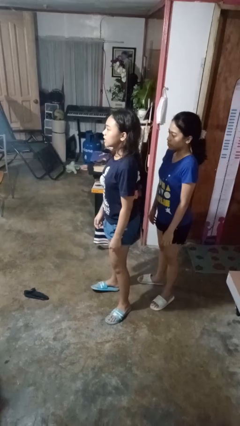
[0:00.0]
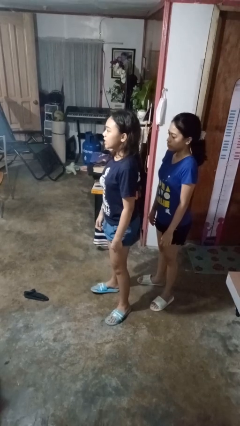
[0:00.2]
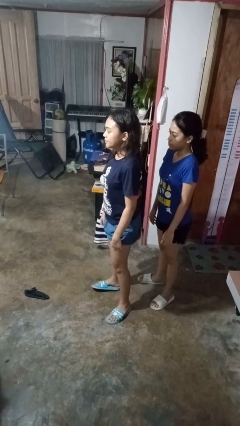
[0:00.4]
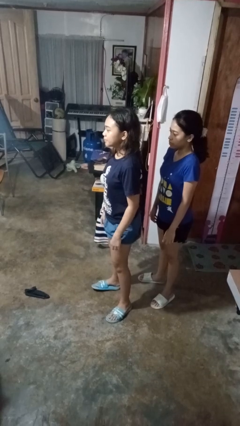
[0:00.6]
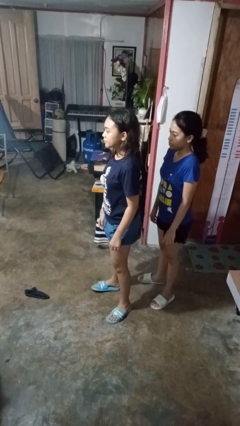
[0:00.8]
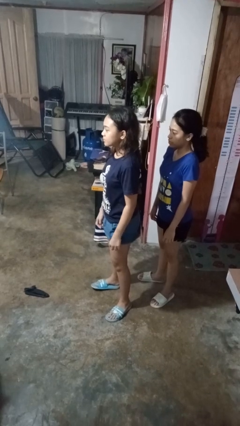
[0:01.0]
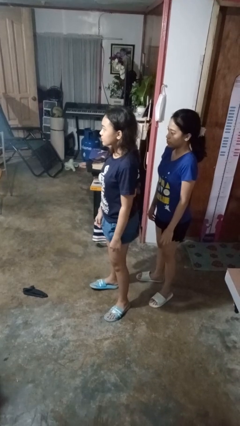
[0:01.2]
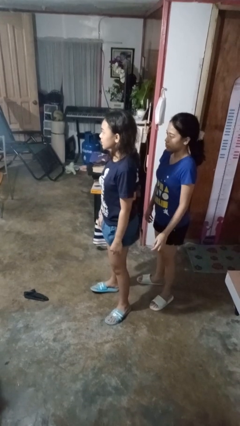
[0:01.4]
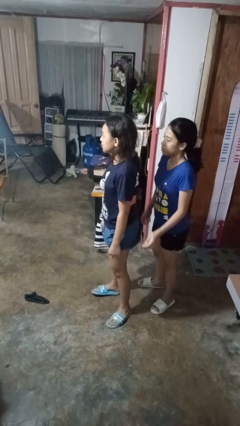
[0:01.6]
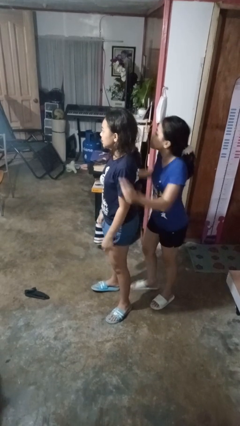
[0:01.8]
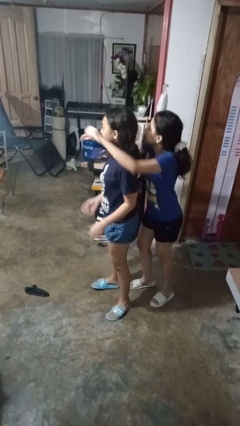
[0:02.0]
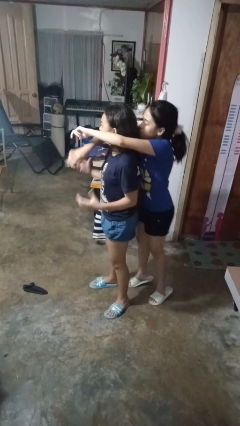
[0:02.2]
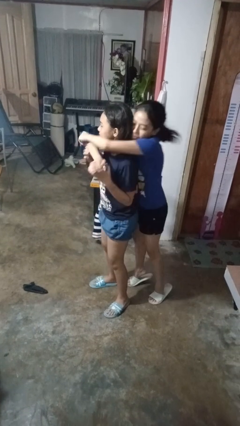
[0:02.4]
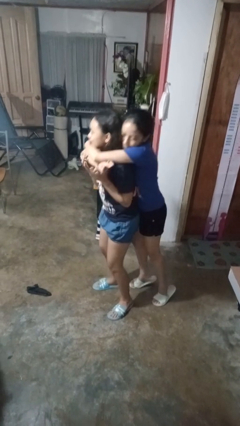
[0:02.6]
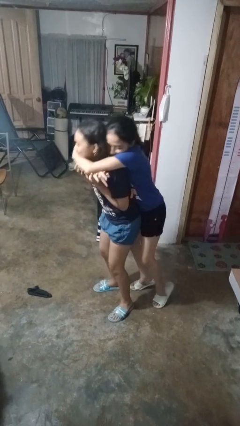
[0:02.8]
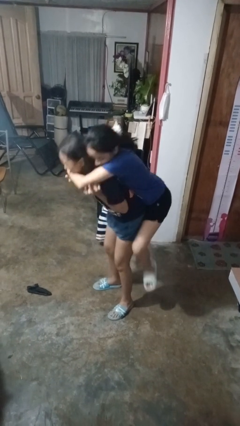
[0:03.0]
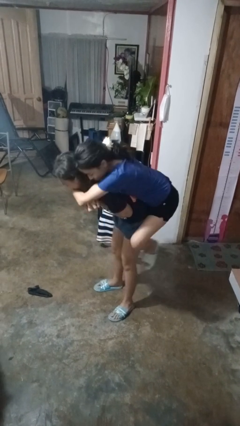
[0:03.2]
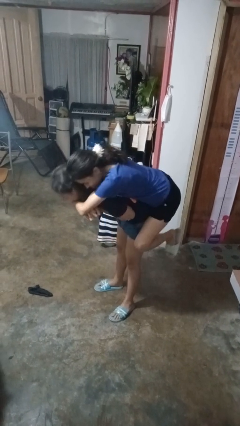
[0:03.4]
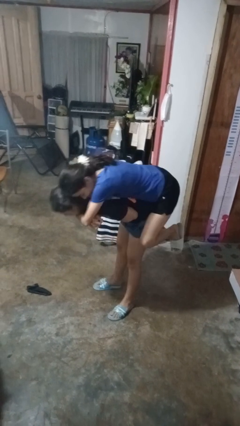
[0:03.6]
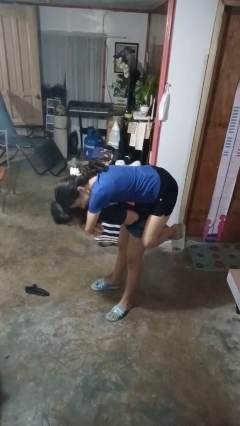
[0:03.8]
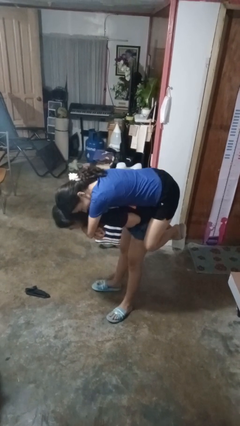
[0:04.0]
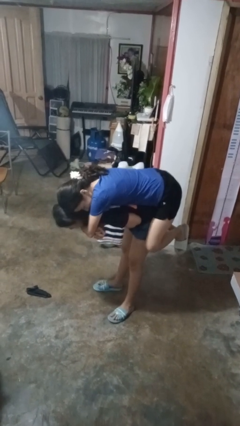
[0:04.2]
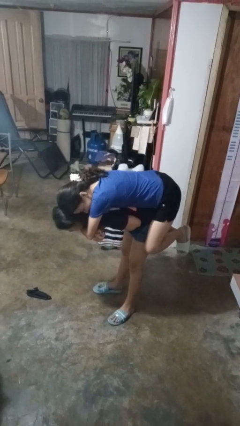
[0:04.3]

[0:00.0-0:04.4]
person picks up person

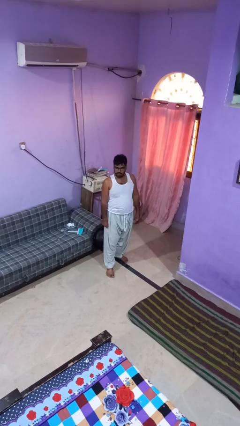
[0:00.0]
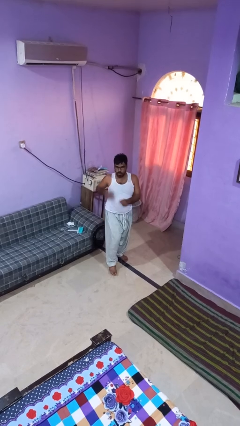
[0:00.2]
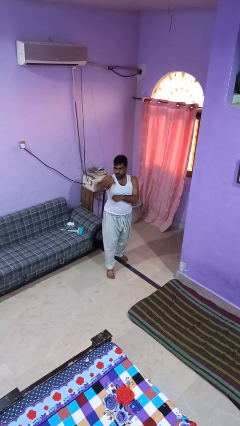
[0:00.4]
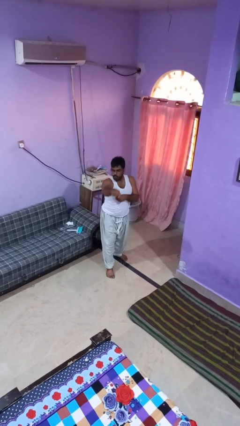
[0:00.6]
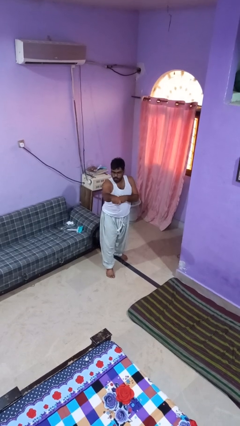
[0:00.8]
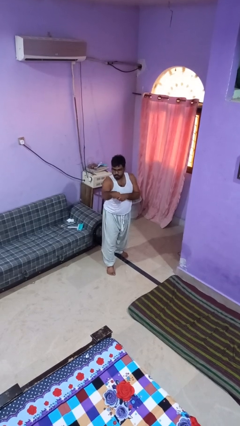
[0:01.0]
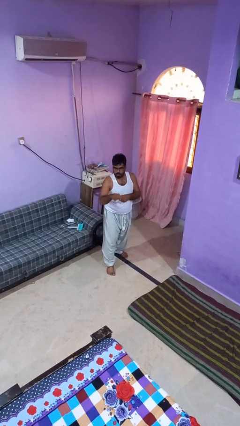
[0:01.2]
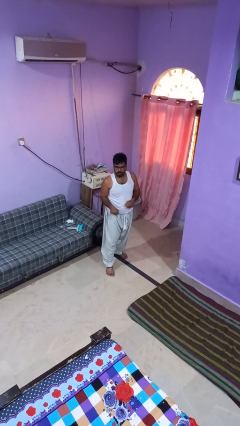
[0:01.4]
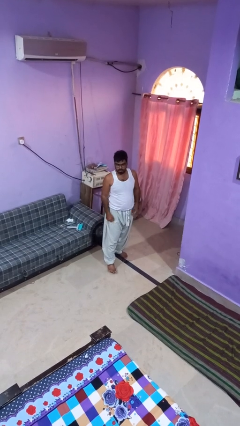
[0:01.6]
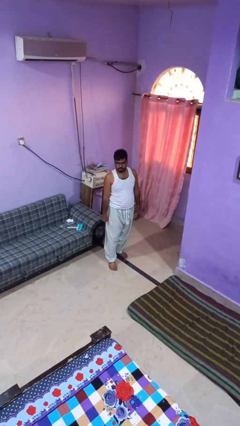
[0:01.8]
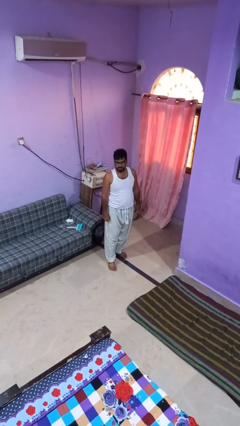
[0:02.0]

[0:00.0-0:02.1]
person punches

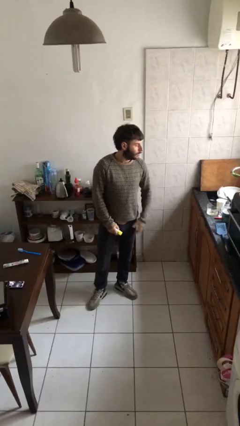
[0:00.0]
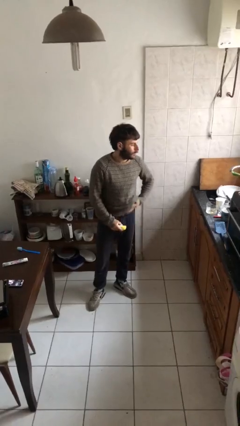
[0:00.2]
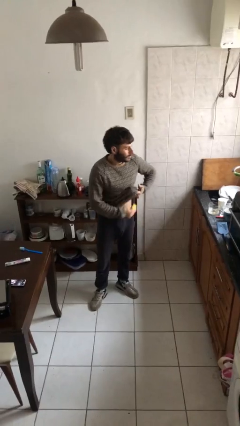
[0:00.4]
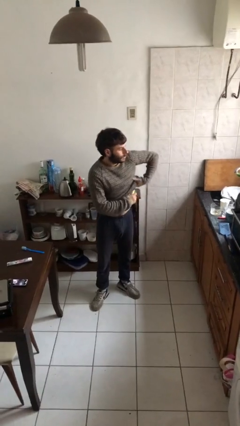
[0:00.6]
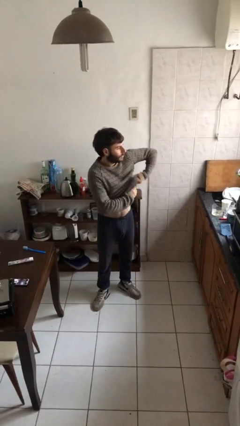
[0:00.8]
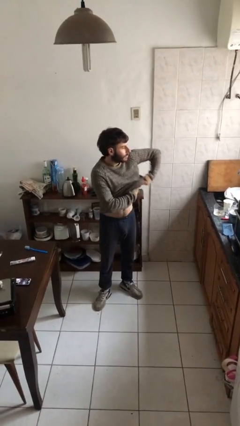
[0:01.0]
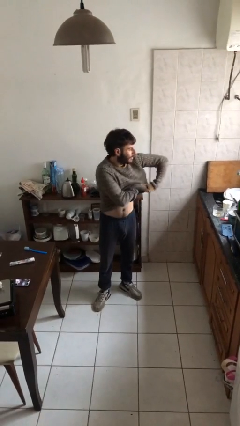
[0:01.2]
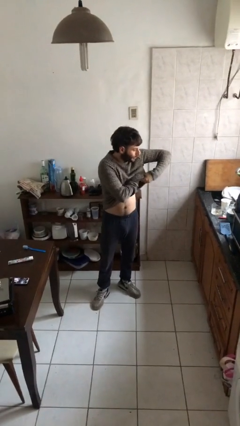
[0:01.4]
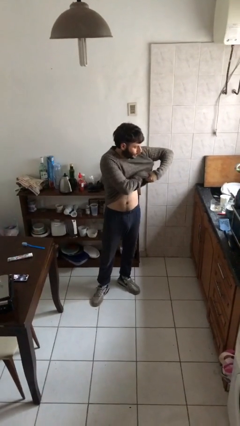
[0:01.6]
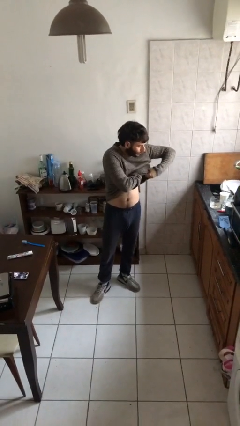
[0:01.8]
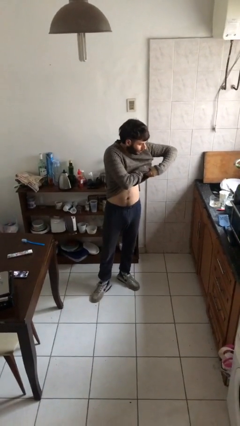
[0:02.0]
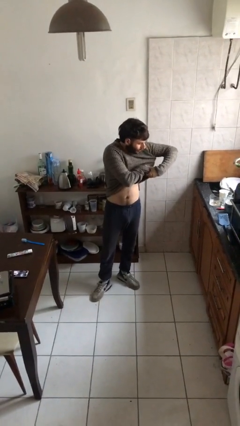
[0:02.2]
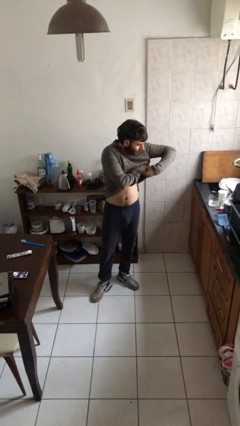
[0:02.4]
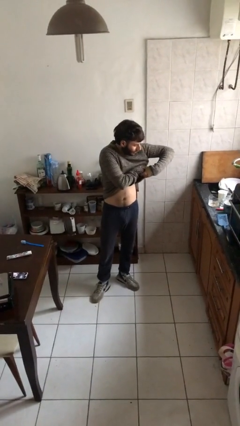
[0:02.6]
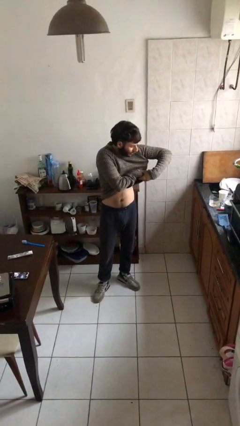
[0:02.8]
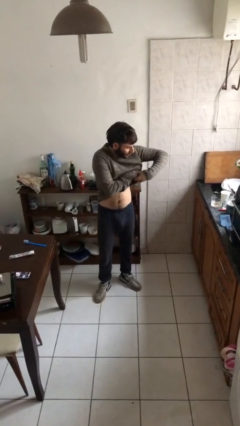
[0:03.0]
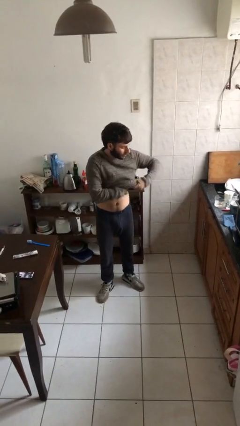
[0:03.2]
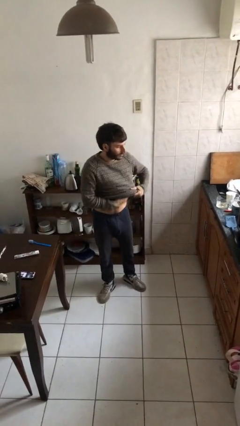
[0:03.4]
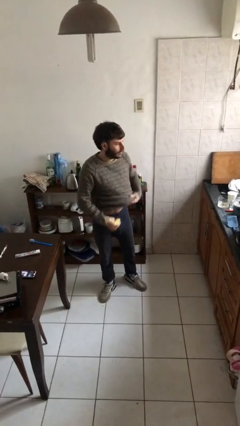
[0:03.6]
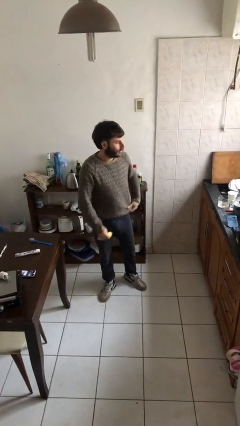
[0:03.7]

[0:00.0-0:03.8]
person applies deodorant

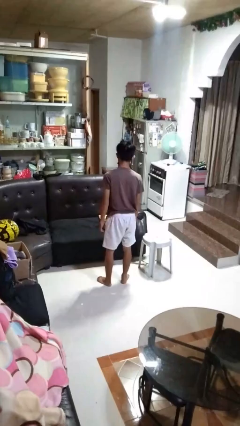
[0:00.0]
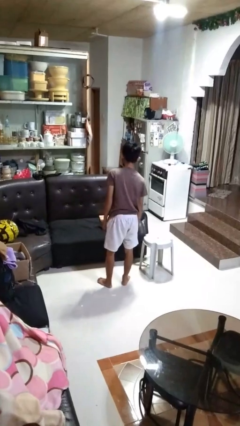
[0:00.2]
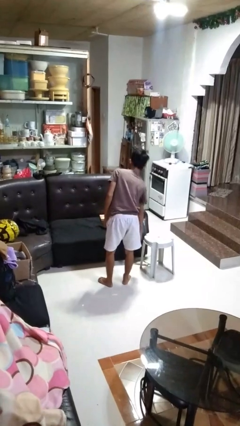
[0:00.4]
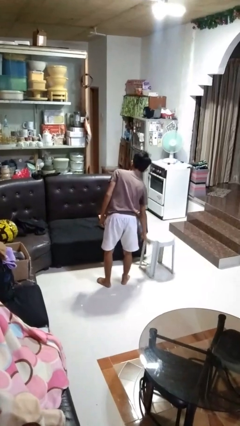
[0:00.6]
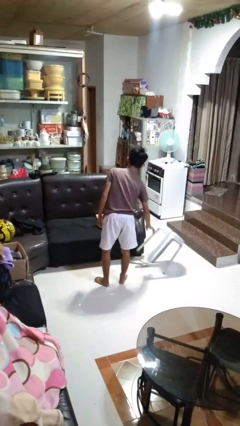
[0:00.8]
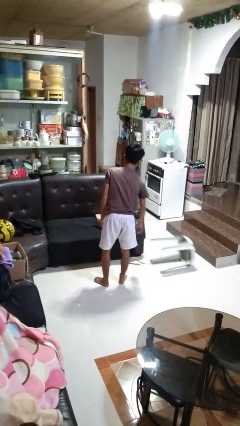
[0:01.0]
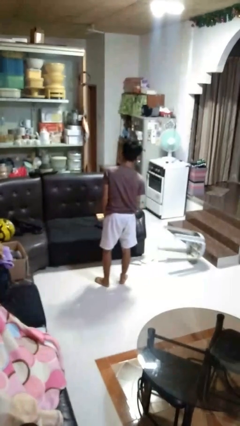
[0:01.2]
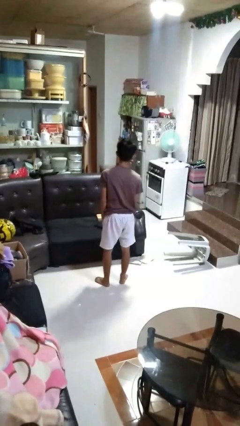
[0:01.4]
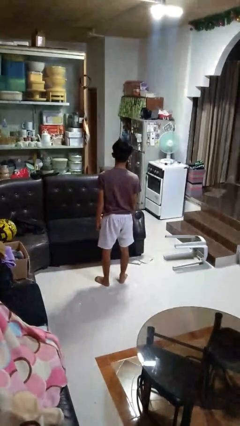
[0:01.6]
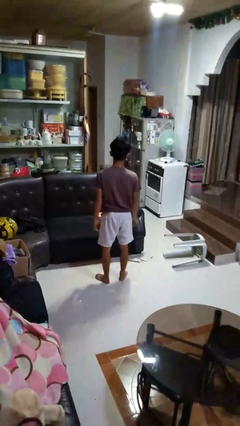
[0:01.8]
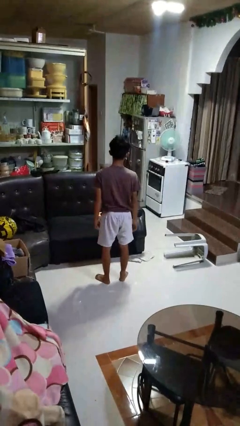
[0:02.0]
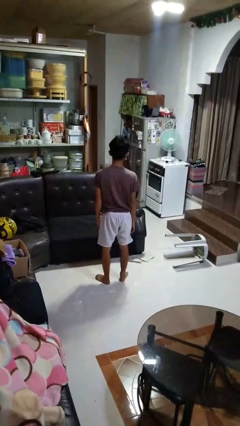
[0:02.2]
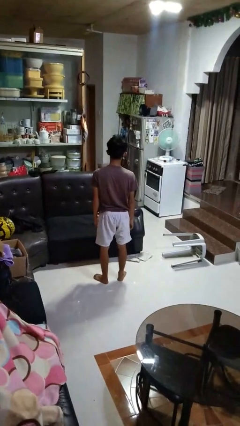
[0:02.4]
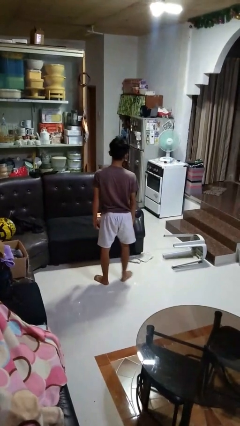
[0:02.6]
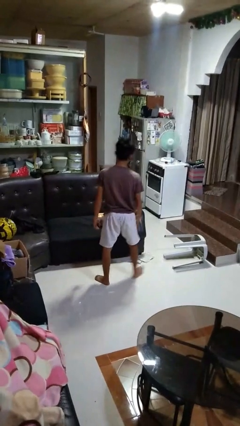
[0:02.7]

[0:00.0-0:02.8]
person knocks over furniture

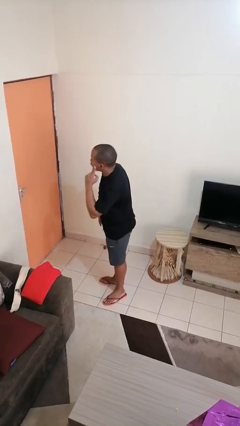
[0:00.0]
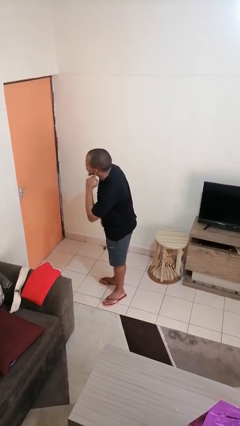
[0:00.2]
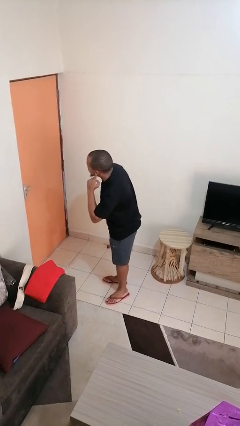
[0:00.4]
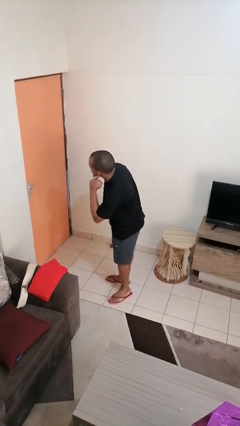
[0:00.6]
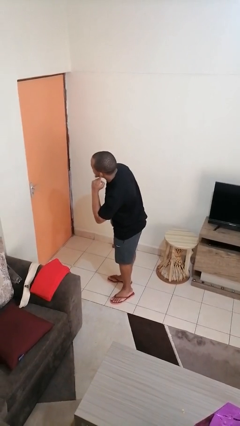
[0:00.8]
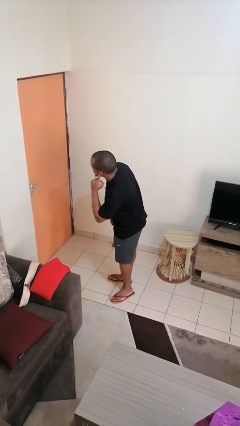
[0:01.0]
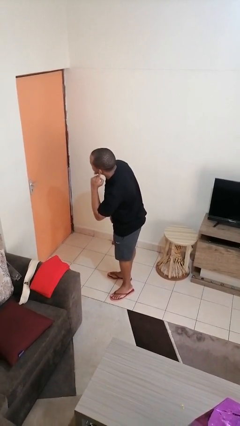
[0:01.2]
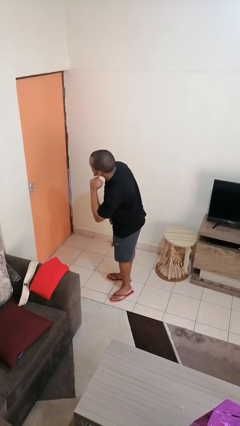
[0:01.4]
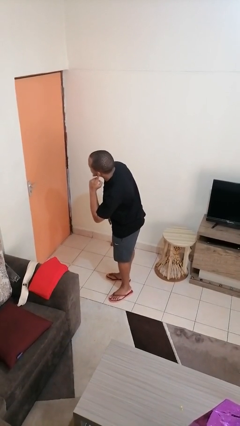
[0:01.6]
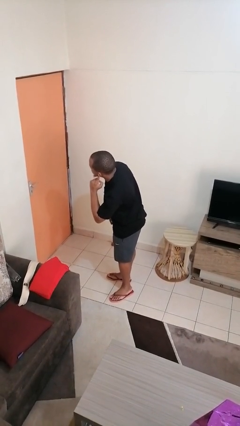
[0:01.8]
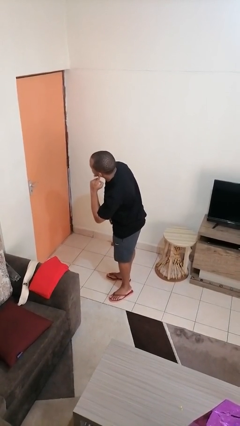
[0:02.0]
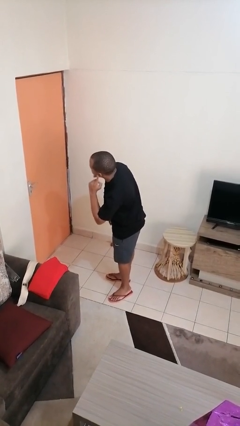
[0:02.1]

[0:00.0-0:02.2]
person gestures listen closely

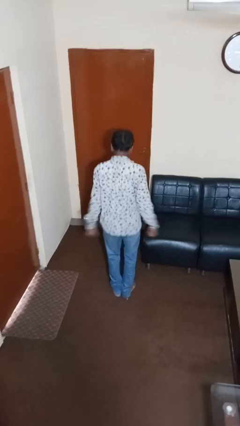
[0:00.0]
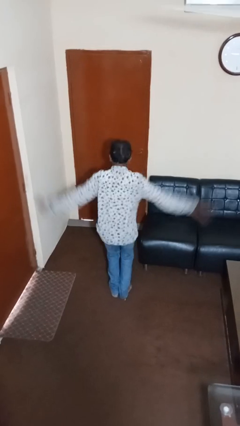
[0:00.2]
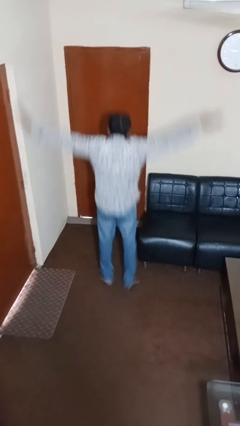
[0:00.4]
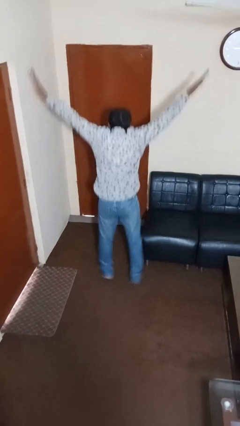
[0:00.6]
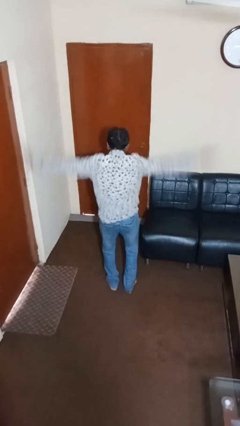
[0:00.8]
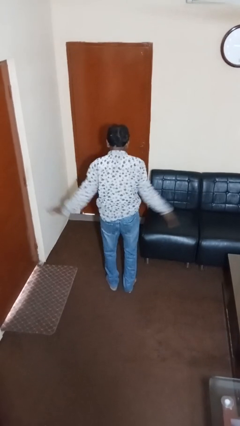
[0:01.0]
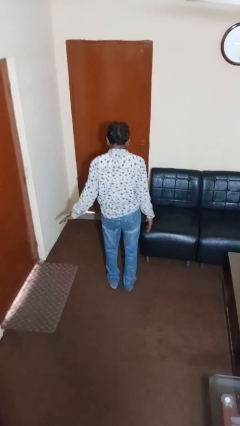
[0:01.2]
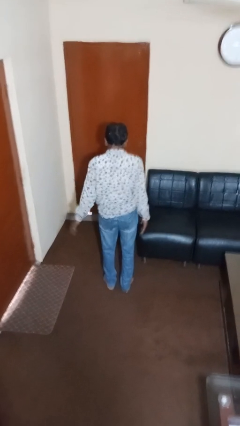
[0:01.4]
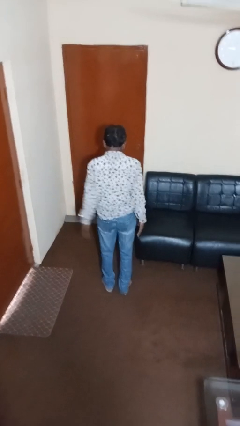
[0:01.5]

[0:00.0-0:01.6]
person exercises with jumping jacks

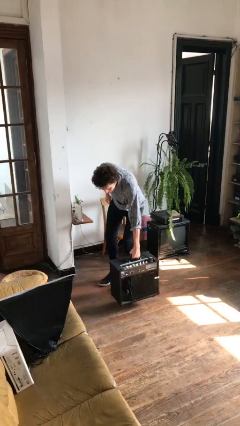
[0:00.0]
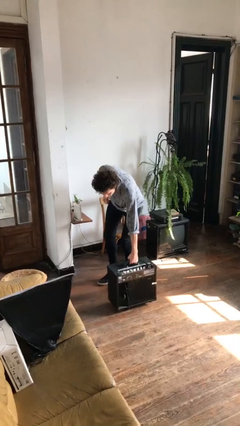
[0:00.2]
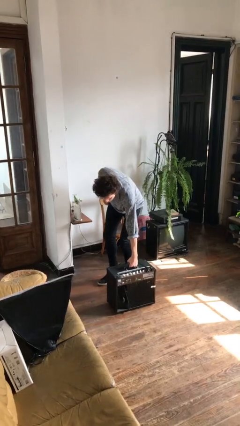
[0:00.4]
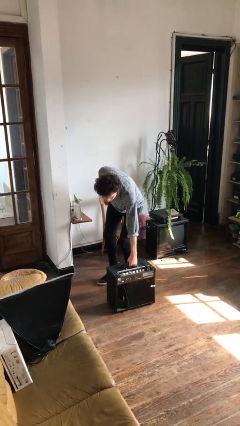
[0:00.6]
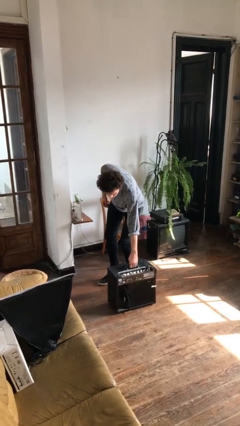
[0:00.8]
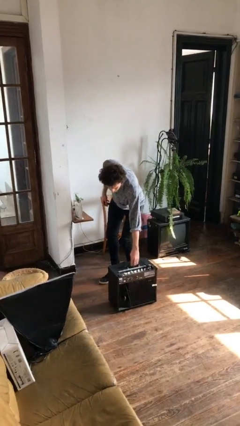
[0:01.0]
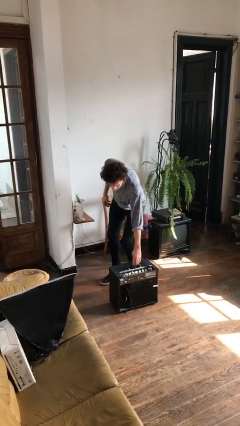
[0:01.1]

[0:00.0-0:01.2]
person puts down object on floor
